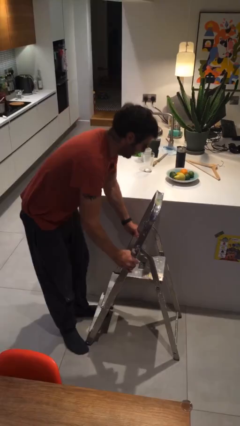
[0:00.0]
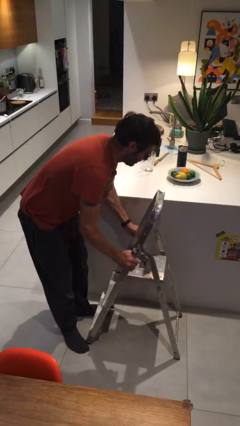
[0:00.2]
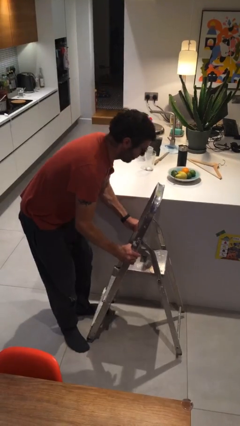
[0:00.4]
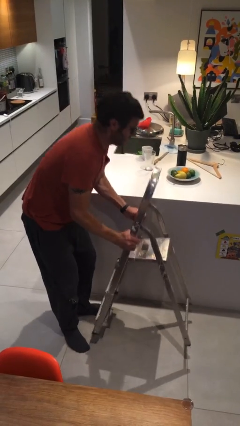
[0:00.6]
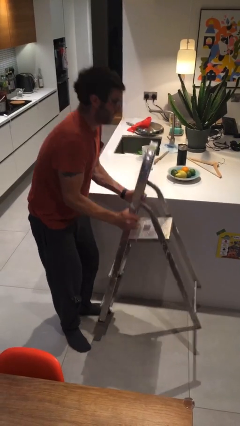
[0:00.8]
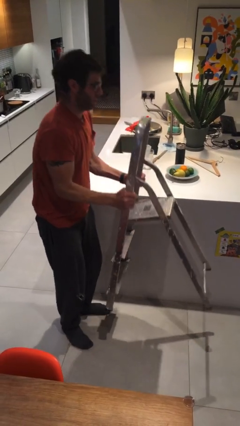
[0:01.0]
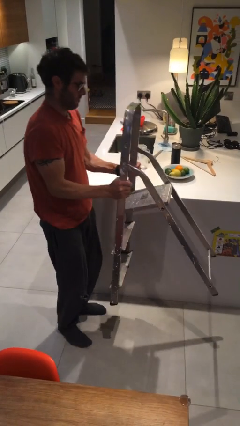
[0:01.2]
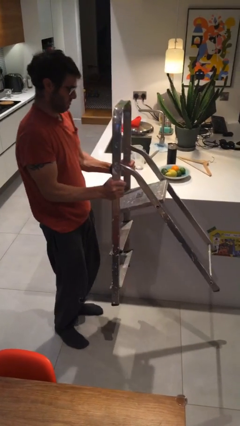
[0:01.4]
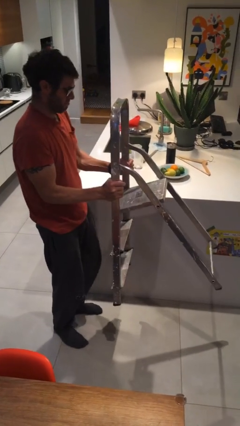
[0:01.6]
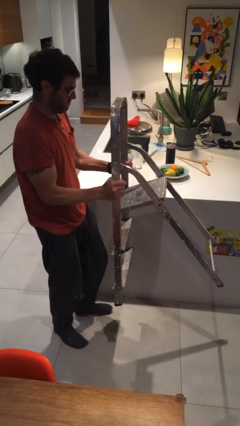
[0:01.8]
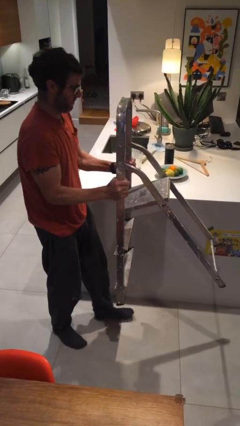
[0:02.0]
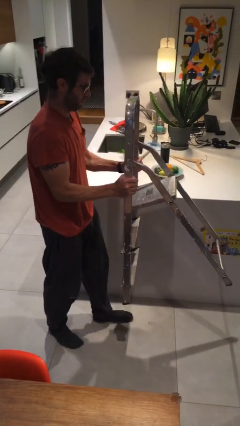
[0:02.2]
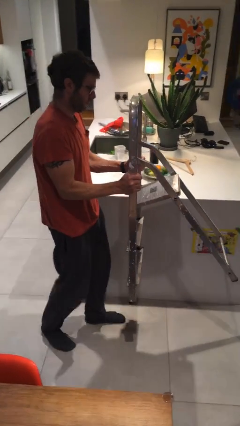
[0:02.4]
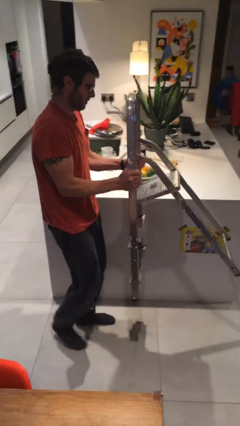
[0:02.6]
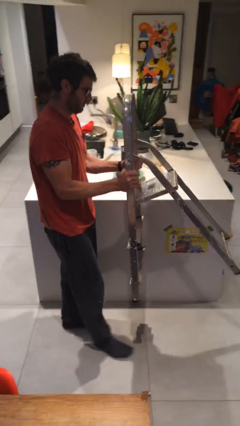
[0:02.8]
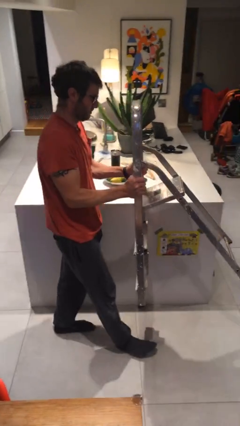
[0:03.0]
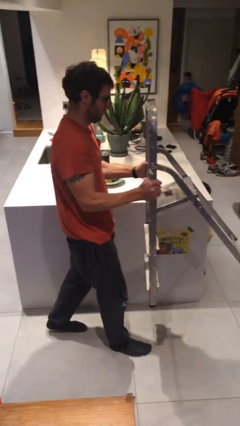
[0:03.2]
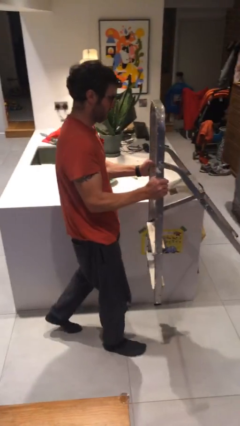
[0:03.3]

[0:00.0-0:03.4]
person picks up object from floor

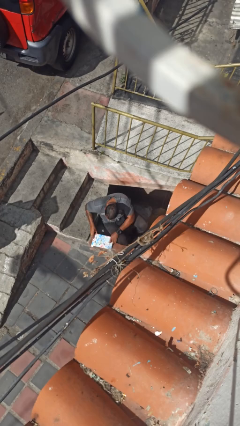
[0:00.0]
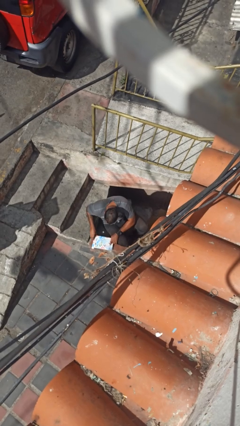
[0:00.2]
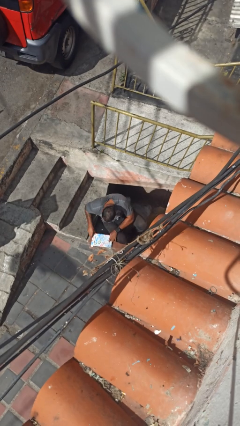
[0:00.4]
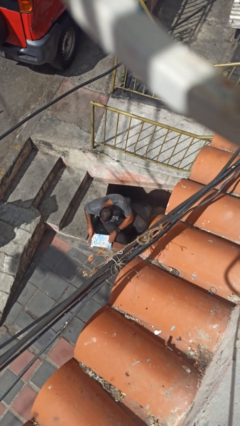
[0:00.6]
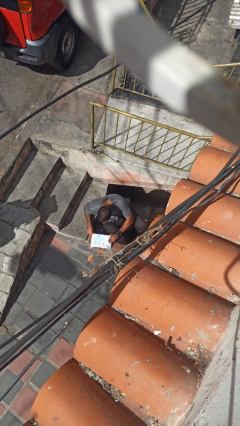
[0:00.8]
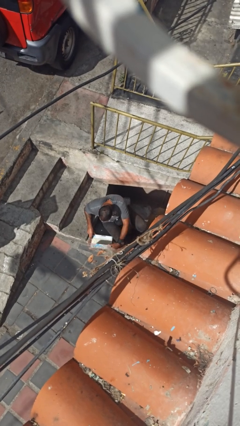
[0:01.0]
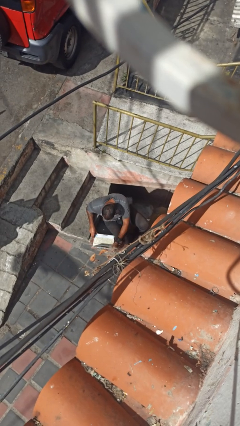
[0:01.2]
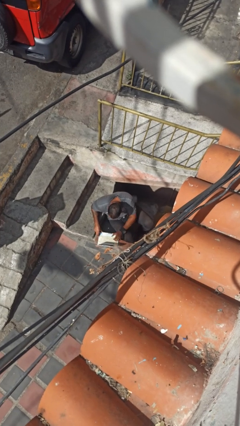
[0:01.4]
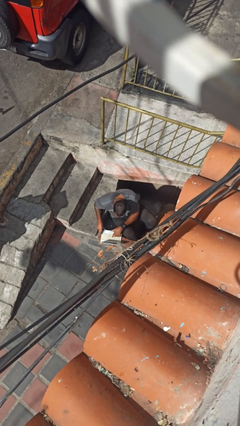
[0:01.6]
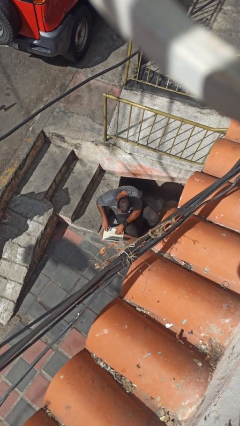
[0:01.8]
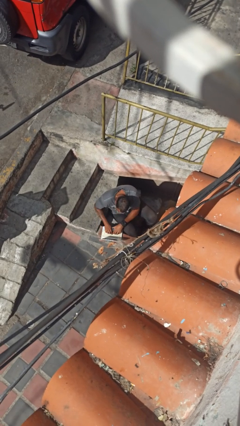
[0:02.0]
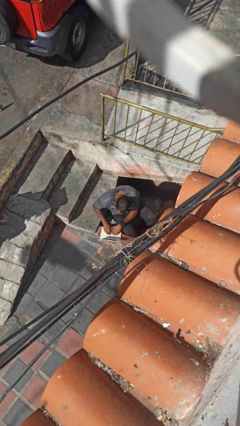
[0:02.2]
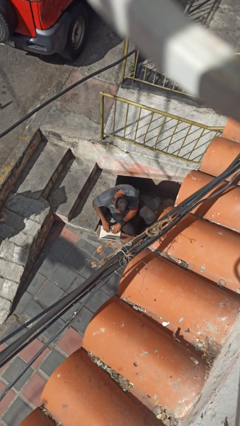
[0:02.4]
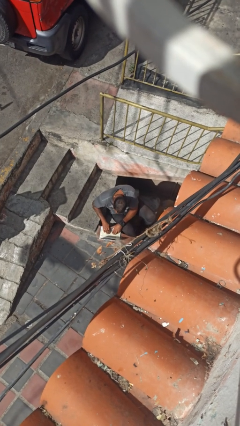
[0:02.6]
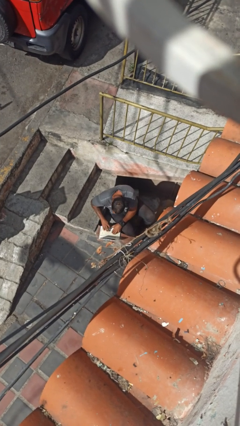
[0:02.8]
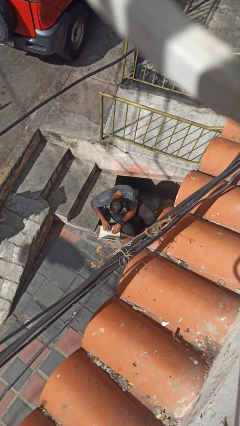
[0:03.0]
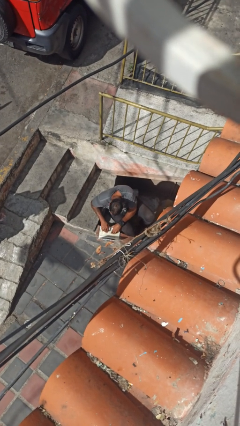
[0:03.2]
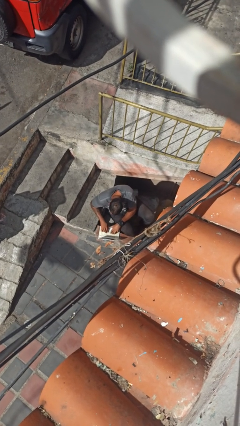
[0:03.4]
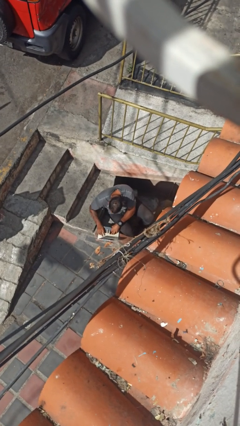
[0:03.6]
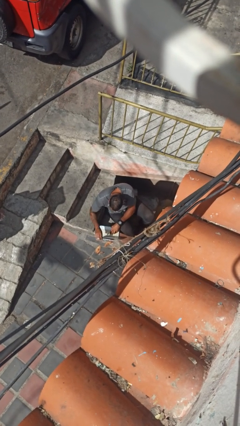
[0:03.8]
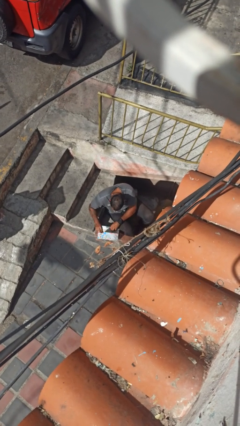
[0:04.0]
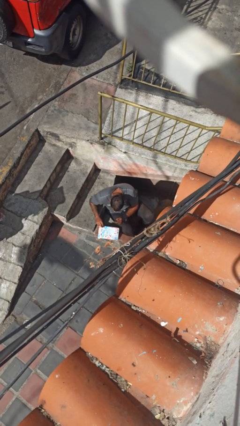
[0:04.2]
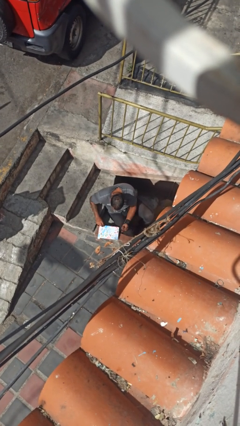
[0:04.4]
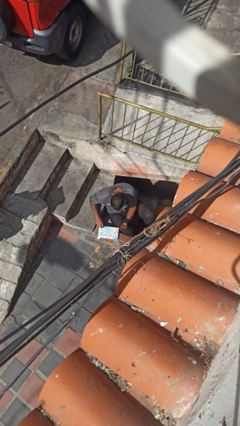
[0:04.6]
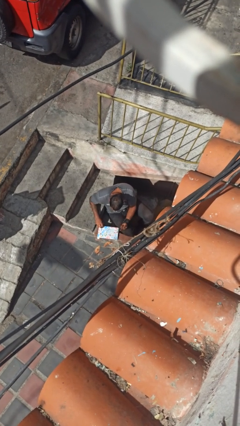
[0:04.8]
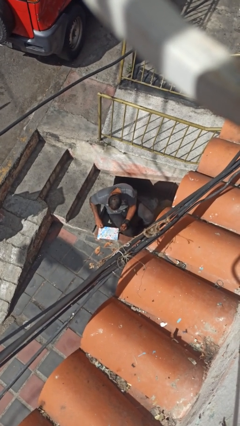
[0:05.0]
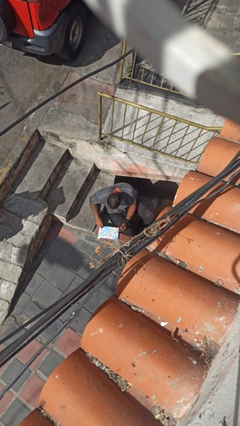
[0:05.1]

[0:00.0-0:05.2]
person interacts with laptop

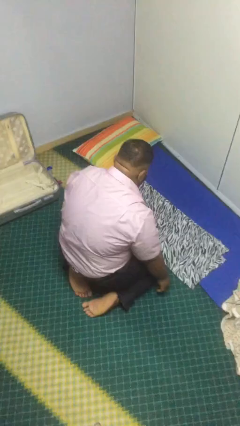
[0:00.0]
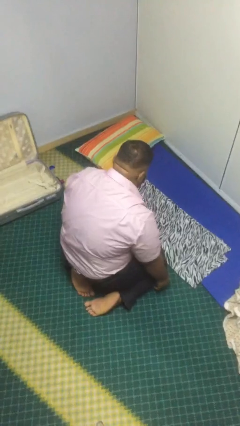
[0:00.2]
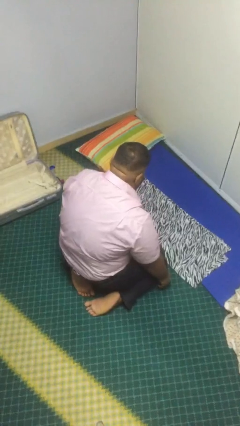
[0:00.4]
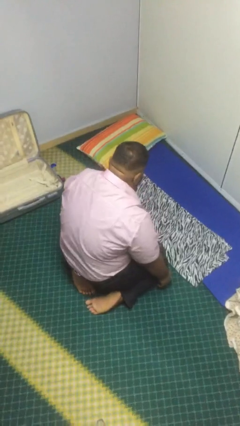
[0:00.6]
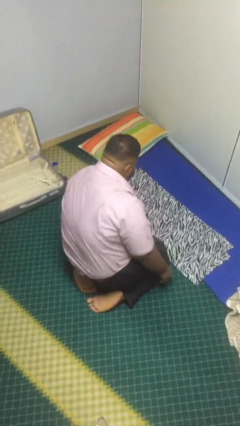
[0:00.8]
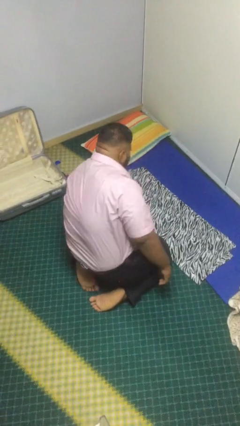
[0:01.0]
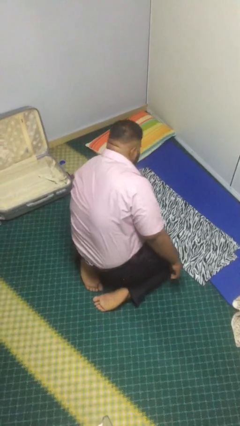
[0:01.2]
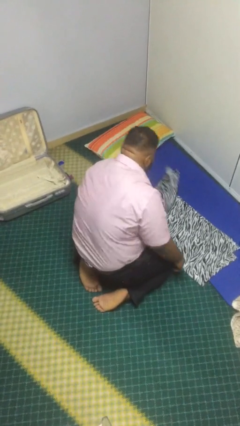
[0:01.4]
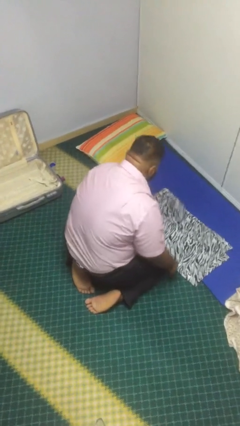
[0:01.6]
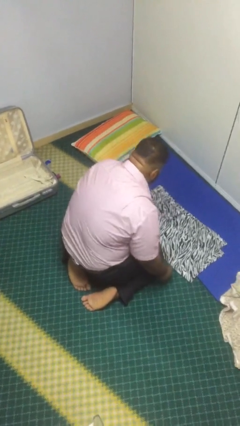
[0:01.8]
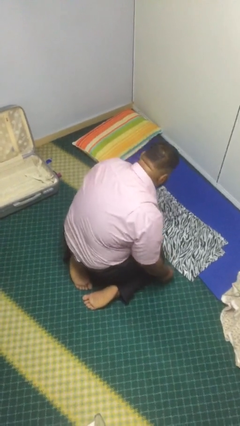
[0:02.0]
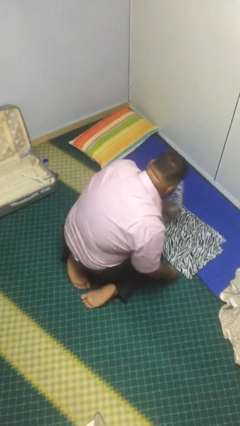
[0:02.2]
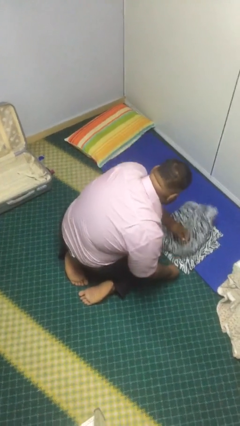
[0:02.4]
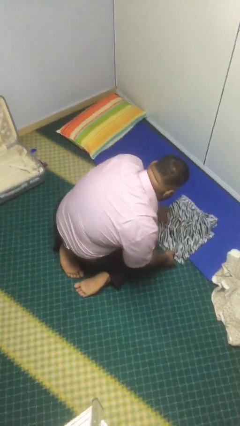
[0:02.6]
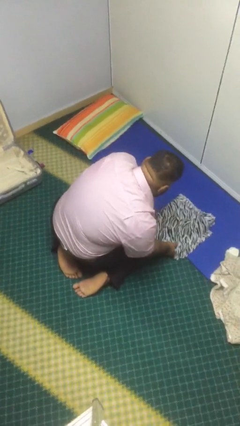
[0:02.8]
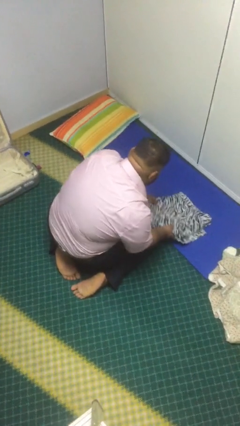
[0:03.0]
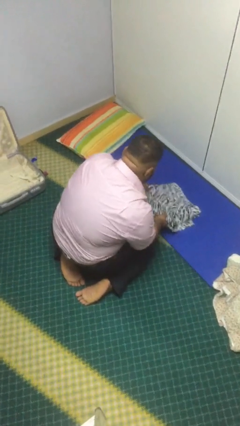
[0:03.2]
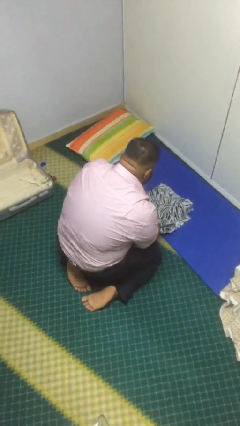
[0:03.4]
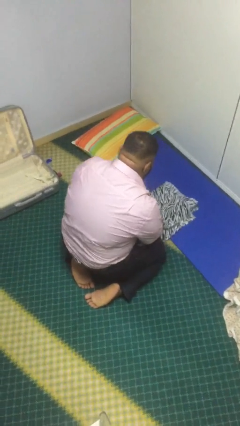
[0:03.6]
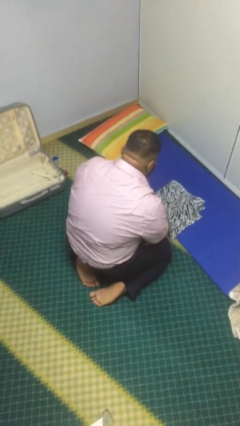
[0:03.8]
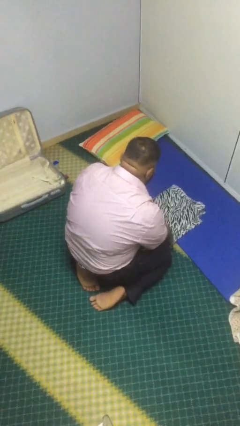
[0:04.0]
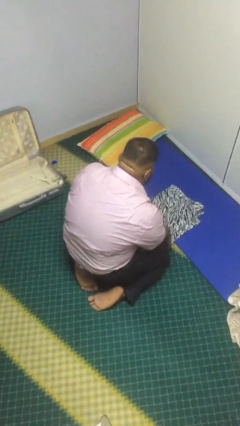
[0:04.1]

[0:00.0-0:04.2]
person folds blanket

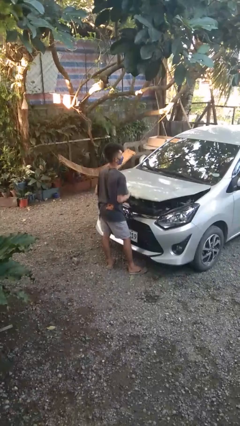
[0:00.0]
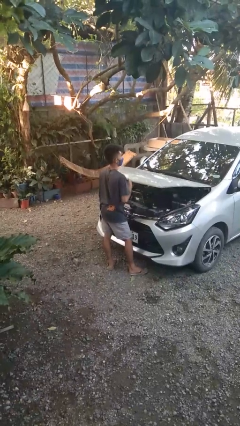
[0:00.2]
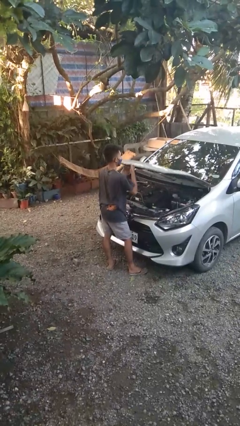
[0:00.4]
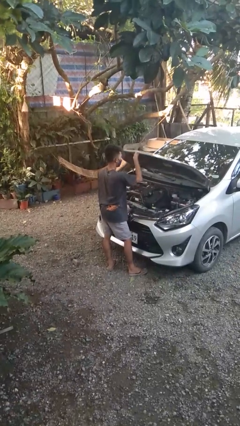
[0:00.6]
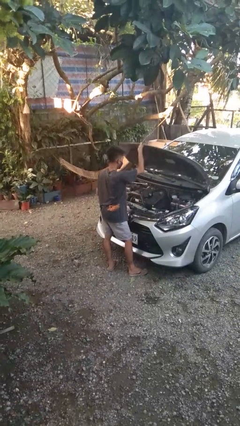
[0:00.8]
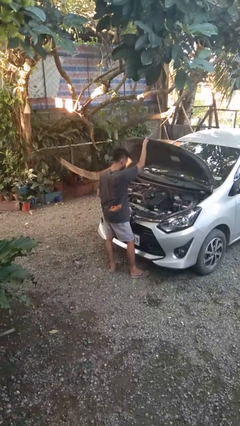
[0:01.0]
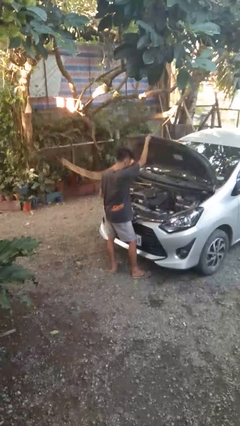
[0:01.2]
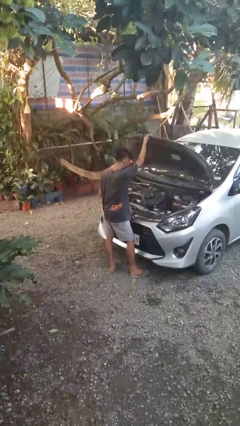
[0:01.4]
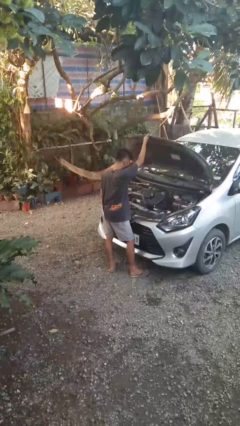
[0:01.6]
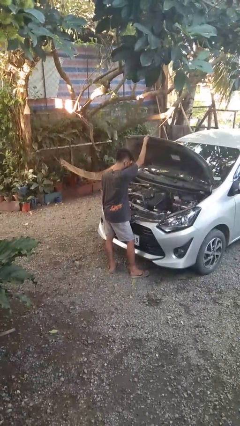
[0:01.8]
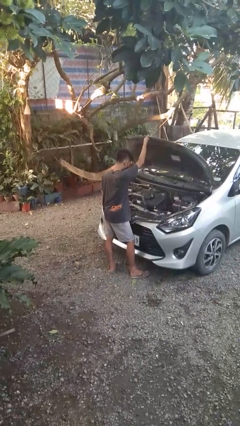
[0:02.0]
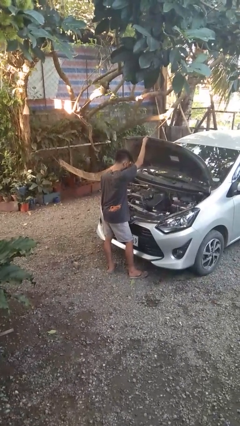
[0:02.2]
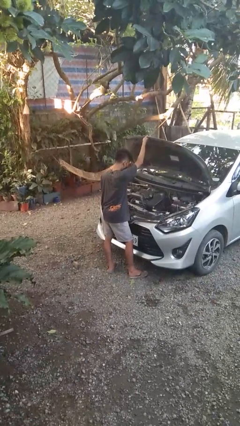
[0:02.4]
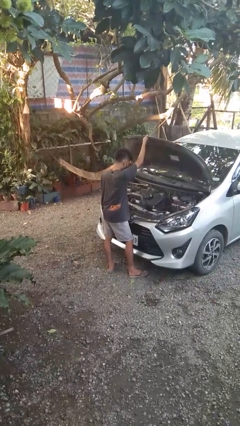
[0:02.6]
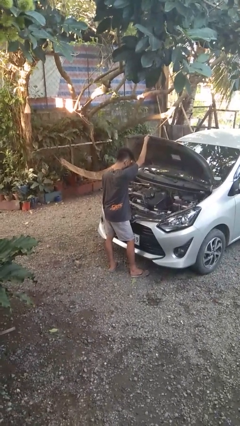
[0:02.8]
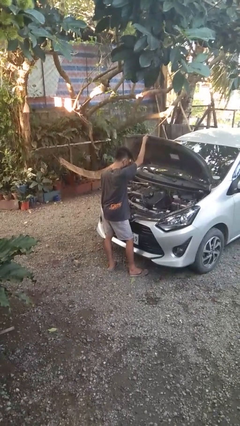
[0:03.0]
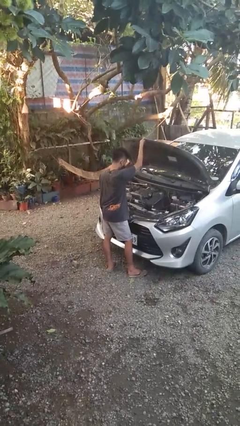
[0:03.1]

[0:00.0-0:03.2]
person opens car hood

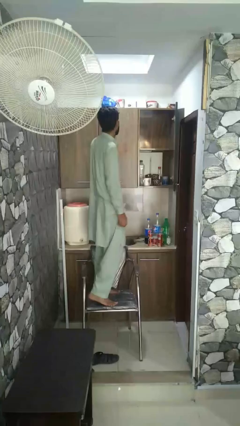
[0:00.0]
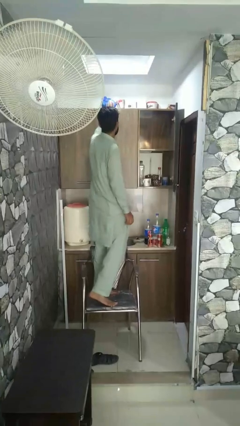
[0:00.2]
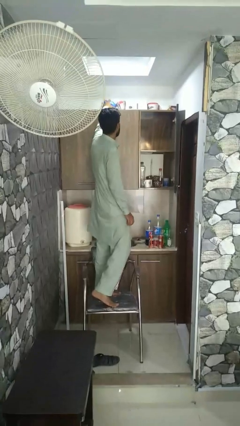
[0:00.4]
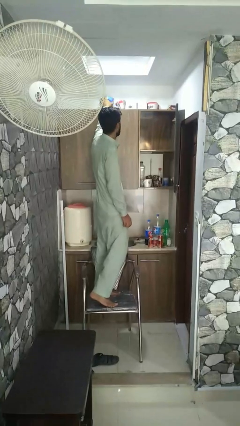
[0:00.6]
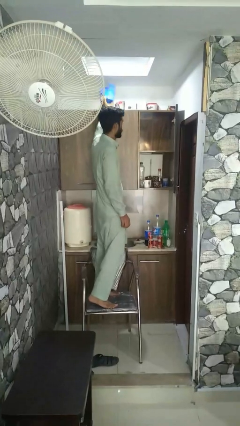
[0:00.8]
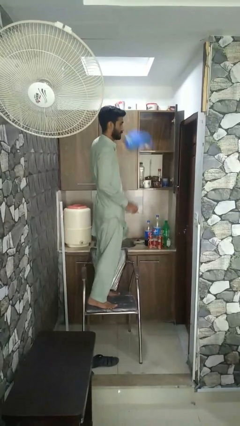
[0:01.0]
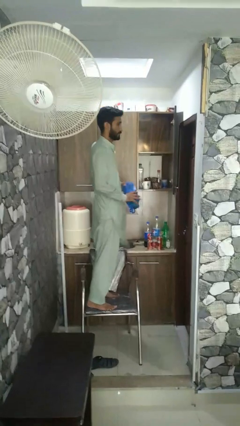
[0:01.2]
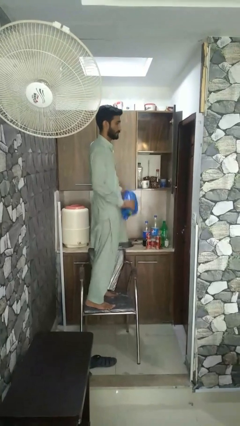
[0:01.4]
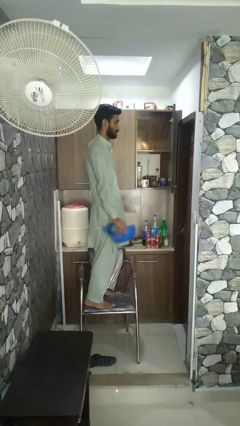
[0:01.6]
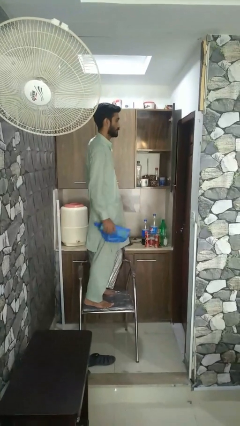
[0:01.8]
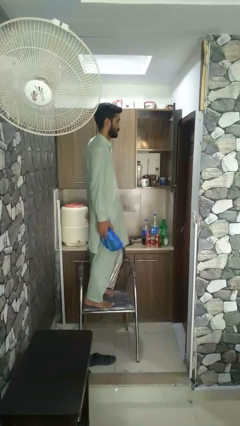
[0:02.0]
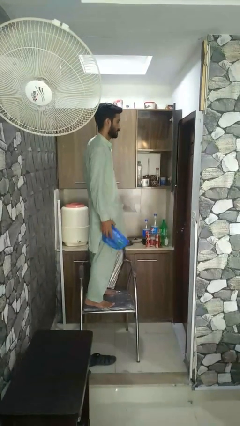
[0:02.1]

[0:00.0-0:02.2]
person picks up object from shelf
